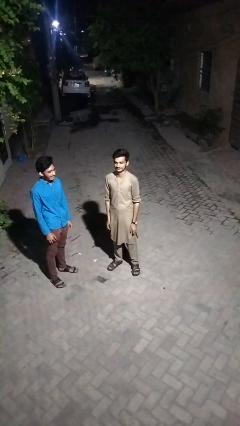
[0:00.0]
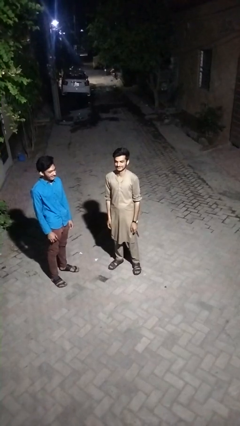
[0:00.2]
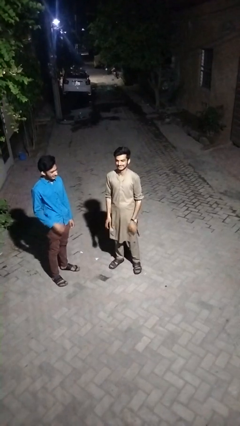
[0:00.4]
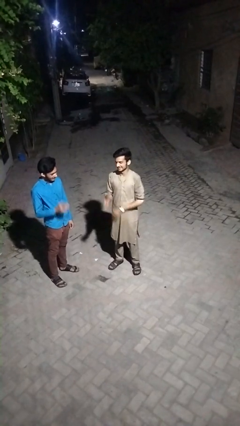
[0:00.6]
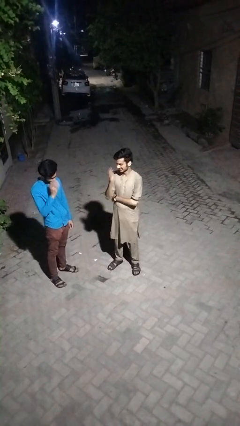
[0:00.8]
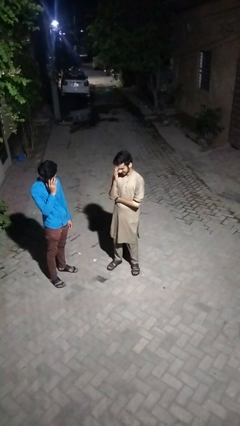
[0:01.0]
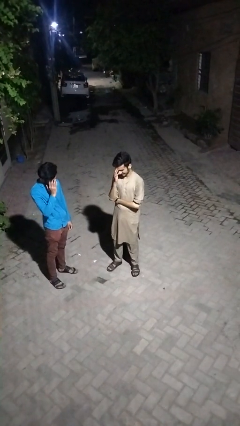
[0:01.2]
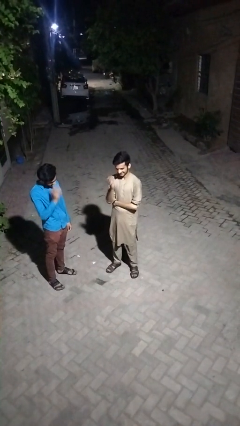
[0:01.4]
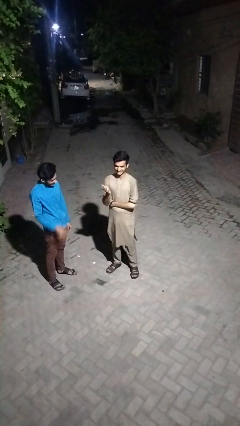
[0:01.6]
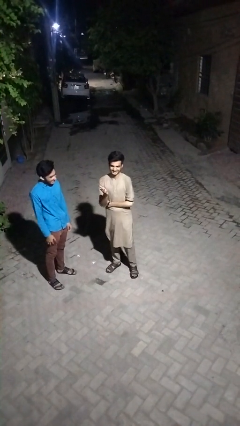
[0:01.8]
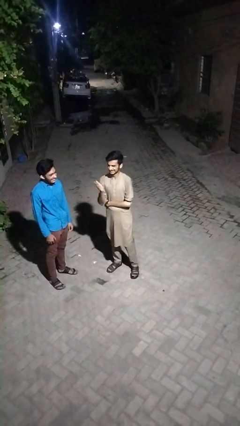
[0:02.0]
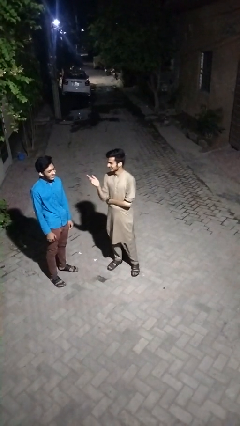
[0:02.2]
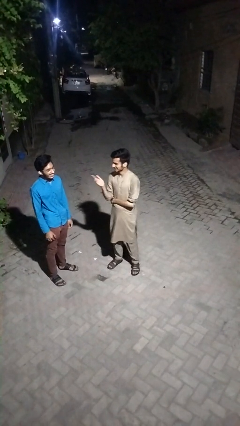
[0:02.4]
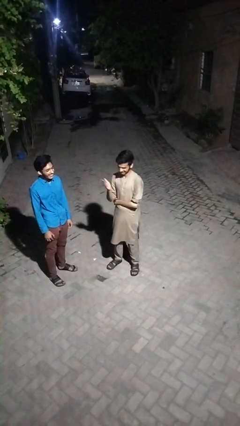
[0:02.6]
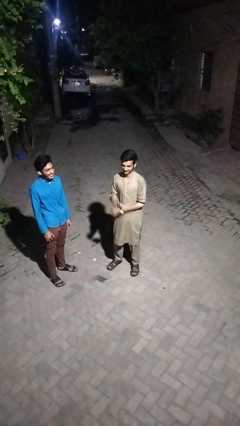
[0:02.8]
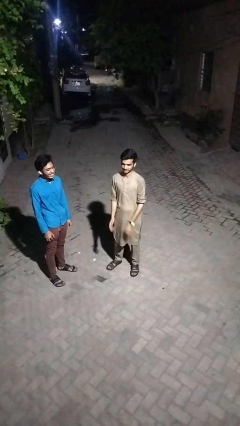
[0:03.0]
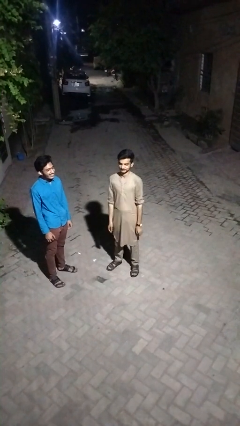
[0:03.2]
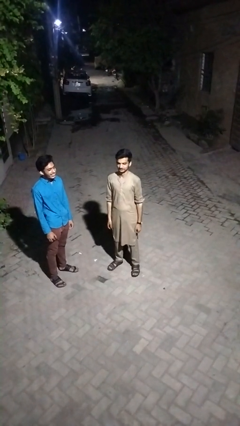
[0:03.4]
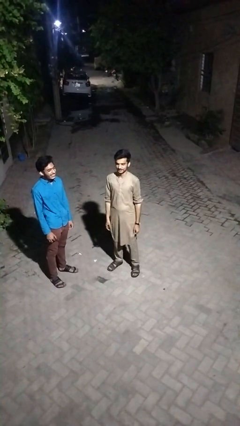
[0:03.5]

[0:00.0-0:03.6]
person laughs with person

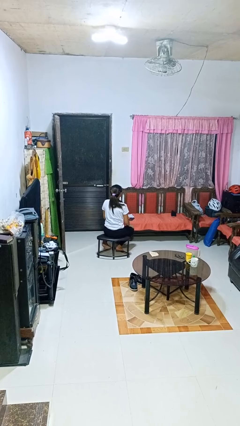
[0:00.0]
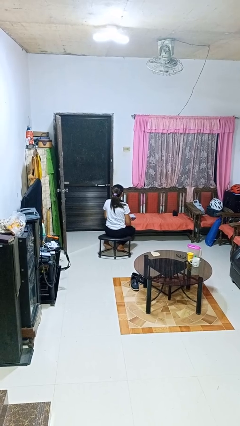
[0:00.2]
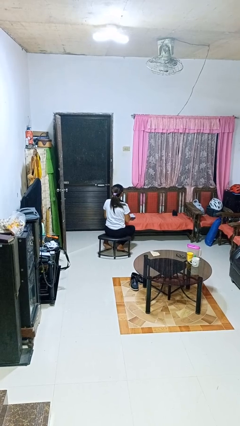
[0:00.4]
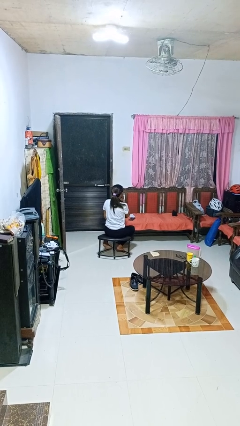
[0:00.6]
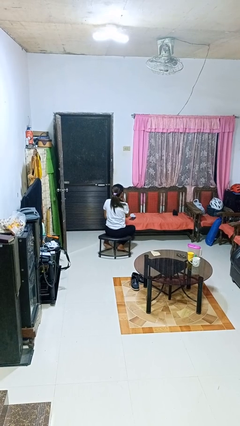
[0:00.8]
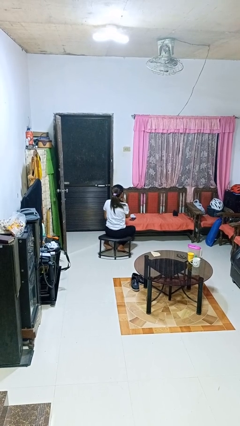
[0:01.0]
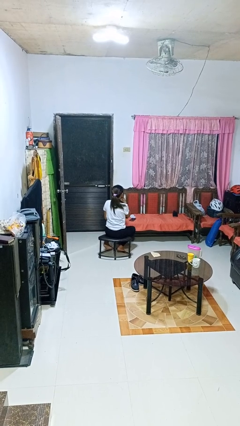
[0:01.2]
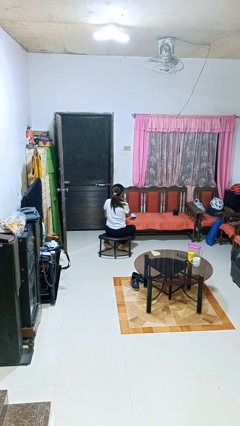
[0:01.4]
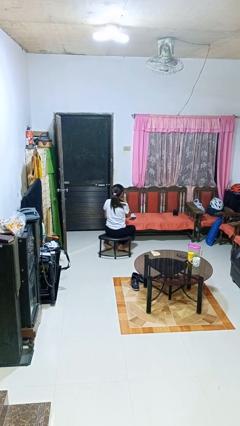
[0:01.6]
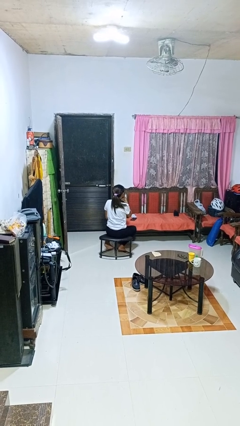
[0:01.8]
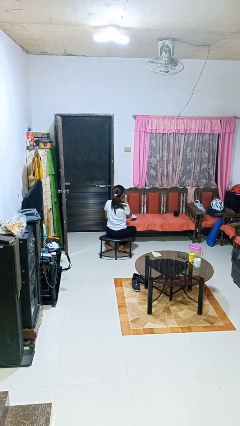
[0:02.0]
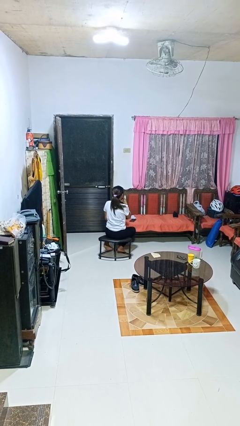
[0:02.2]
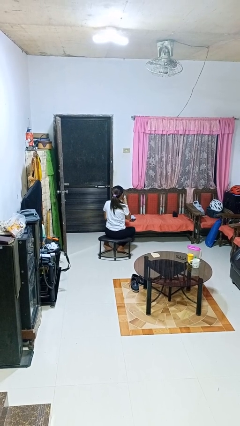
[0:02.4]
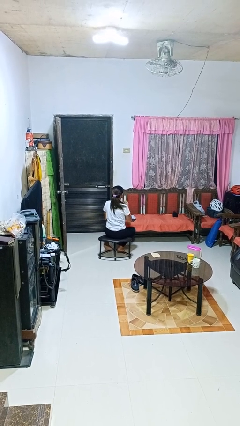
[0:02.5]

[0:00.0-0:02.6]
person strokes chin

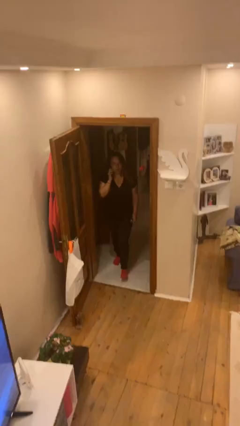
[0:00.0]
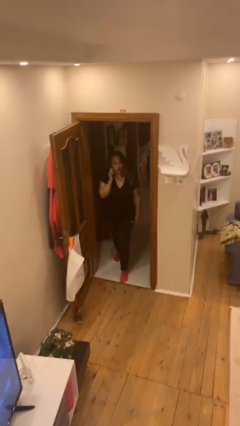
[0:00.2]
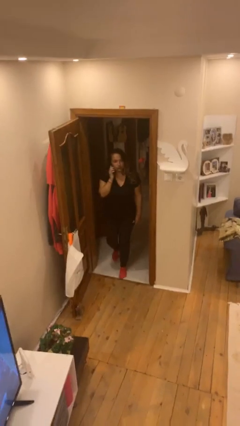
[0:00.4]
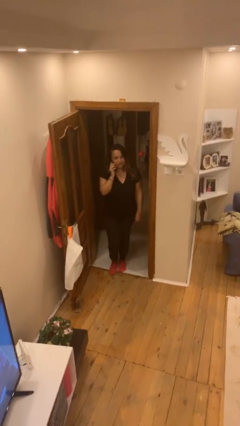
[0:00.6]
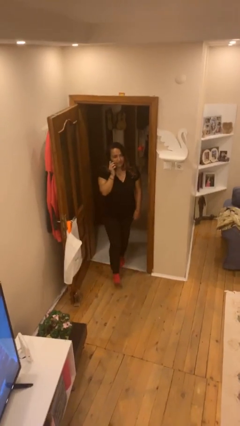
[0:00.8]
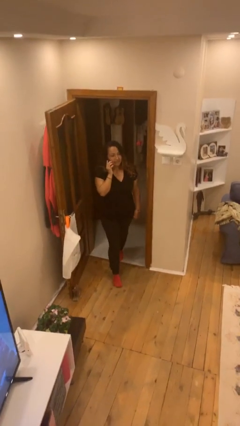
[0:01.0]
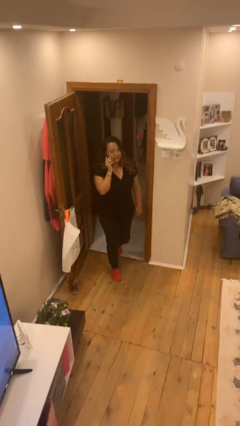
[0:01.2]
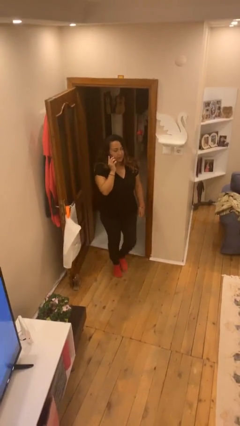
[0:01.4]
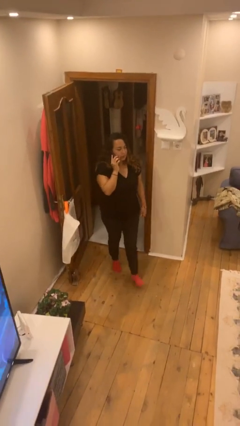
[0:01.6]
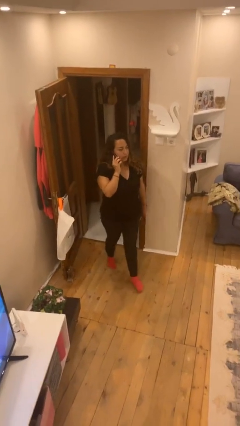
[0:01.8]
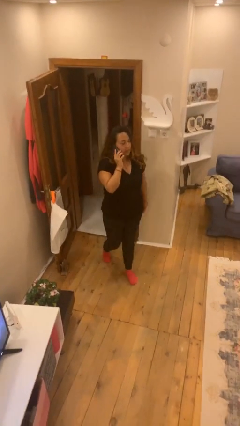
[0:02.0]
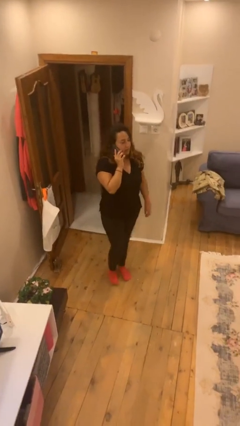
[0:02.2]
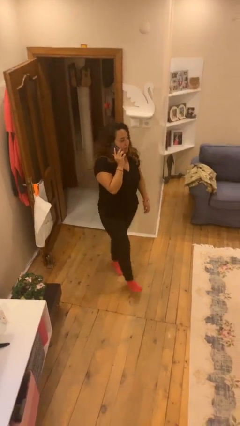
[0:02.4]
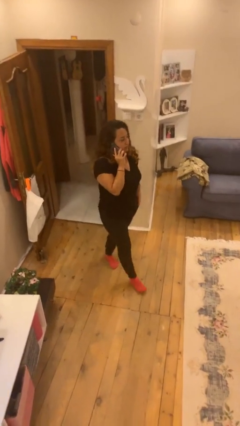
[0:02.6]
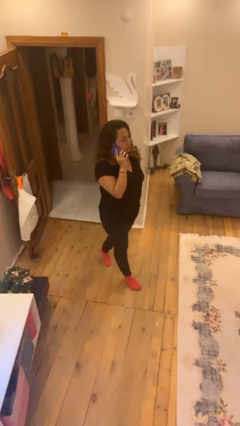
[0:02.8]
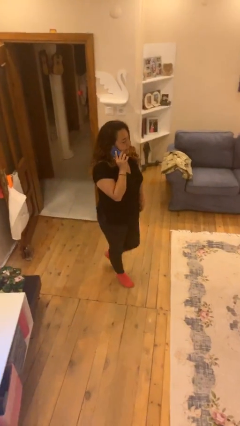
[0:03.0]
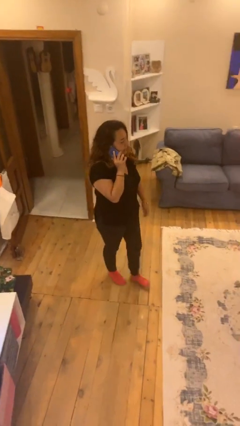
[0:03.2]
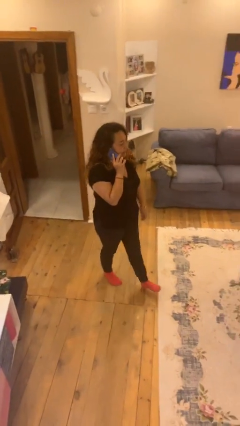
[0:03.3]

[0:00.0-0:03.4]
person enters scene through structure

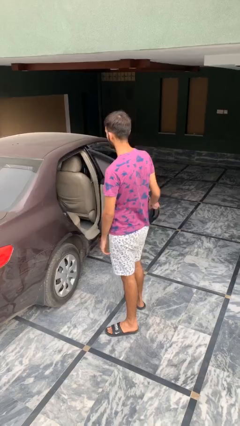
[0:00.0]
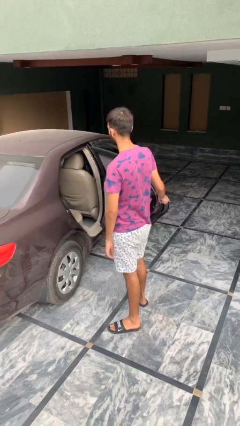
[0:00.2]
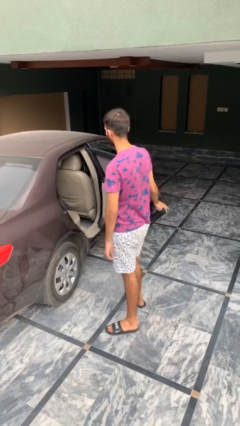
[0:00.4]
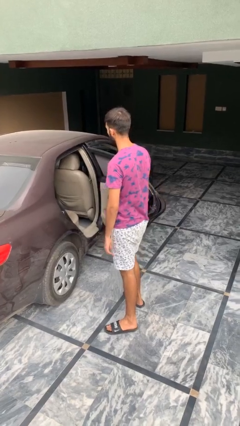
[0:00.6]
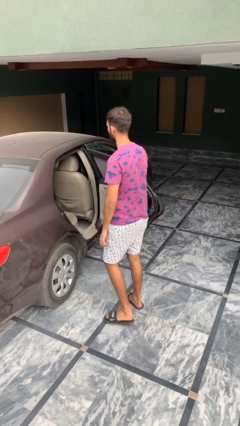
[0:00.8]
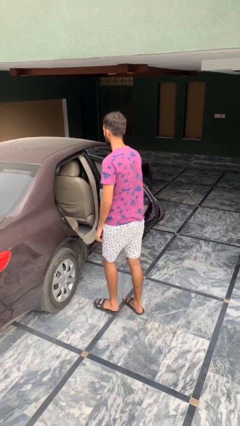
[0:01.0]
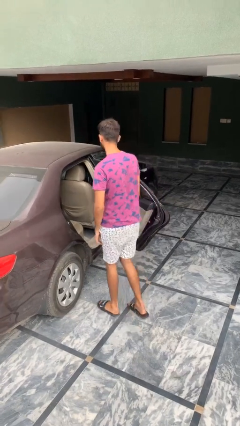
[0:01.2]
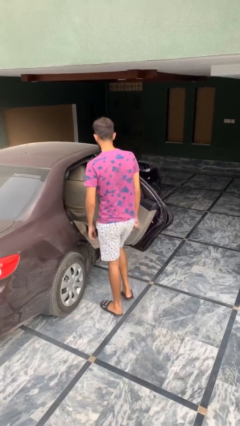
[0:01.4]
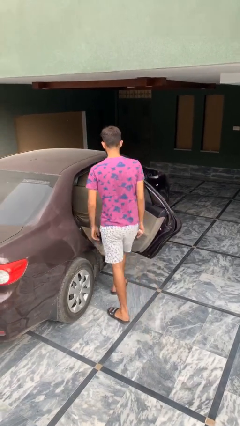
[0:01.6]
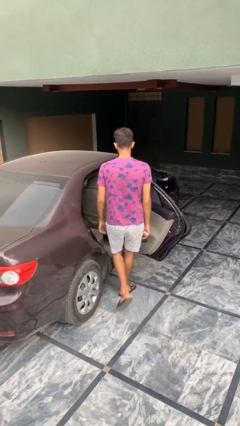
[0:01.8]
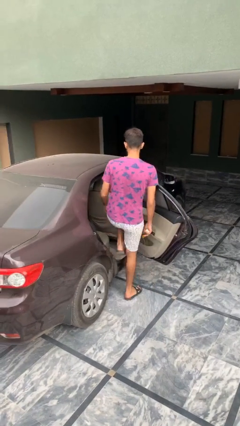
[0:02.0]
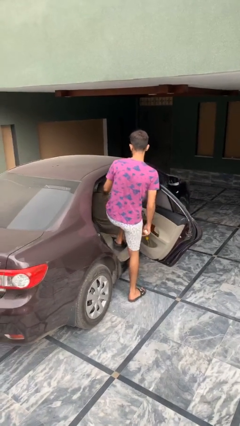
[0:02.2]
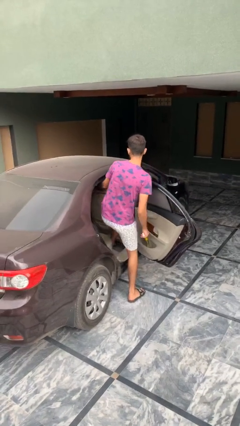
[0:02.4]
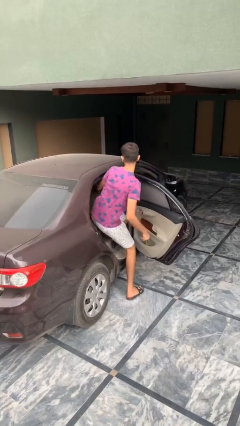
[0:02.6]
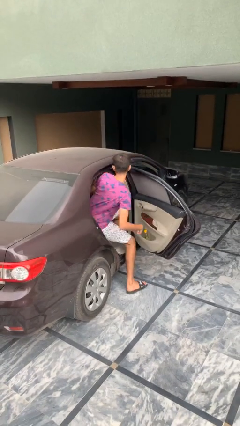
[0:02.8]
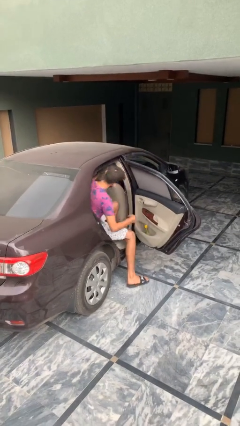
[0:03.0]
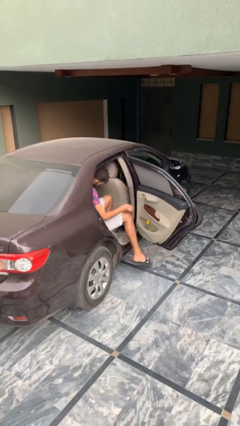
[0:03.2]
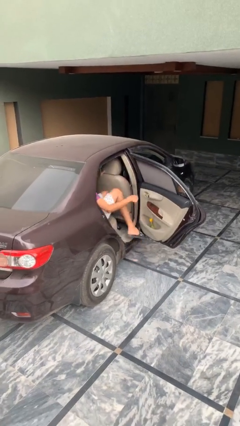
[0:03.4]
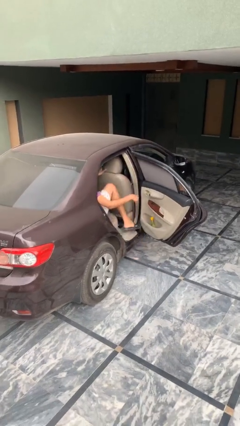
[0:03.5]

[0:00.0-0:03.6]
person enters car

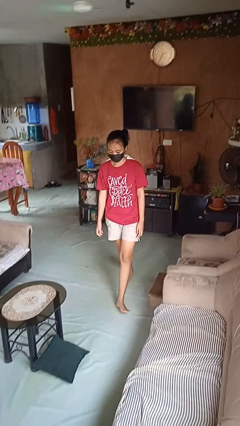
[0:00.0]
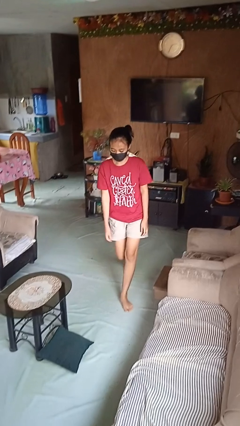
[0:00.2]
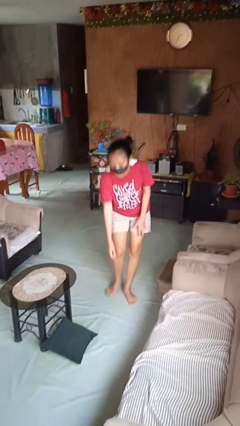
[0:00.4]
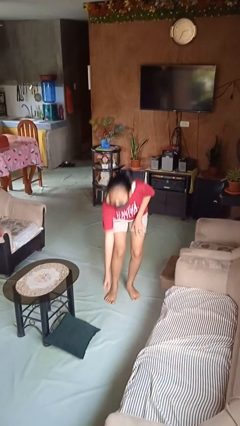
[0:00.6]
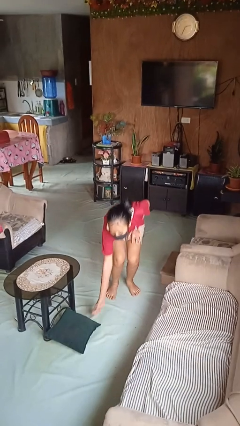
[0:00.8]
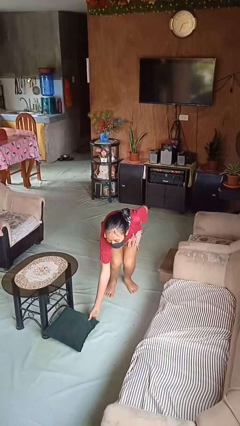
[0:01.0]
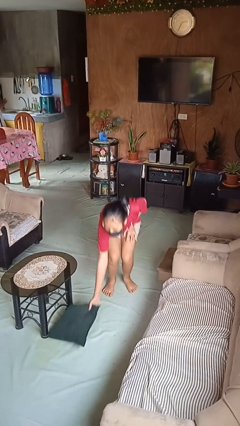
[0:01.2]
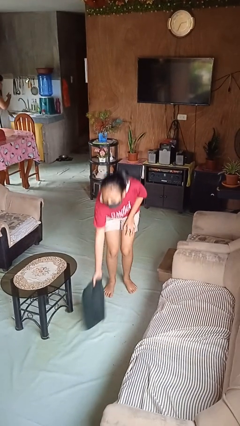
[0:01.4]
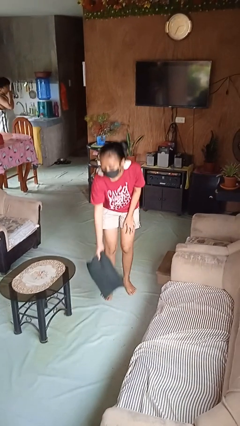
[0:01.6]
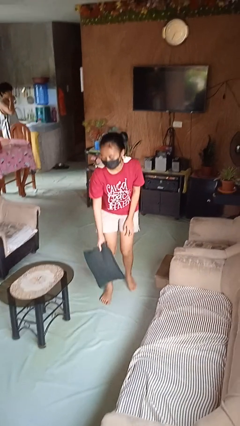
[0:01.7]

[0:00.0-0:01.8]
person picks up object from floor

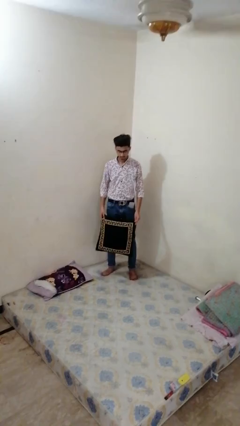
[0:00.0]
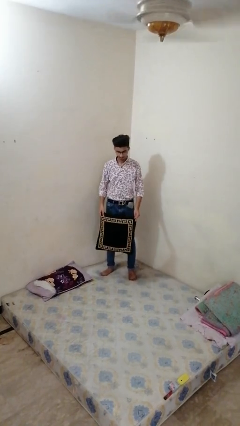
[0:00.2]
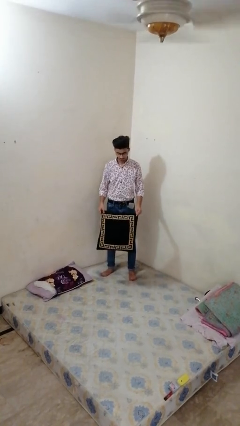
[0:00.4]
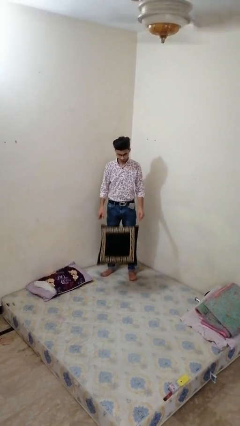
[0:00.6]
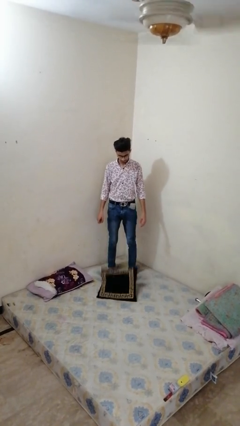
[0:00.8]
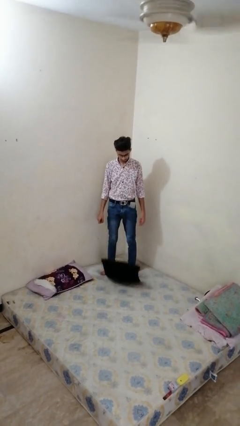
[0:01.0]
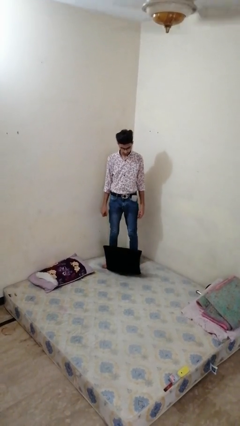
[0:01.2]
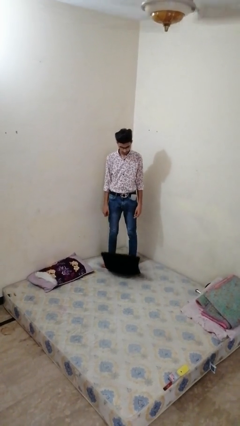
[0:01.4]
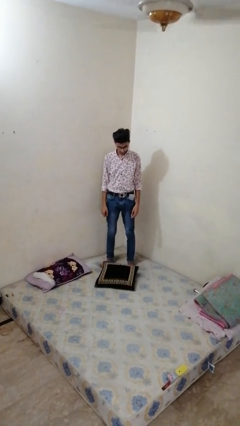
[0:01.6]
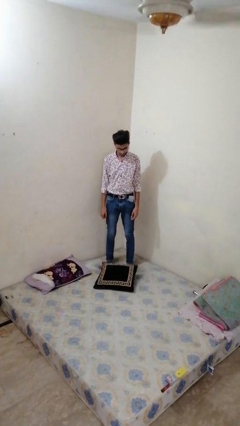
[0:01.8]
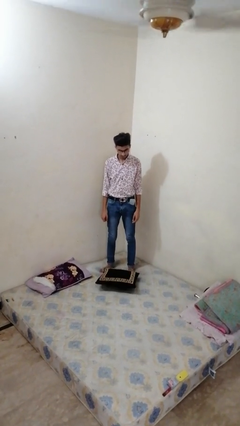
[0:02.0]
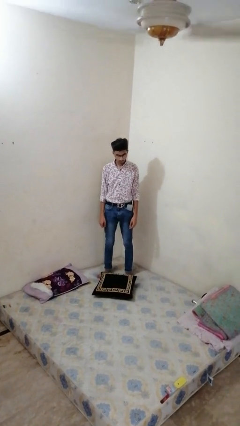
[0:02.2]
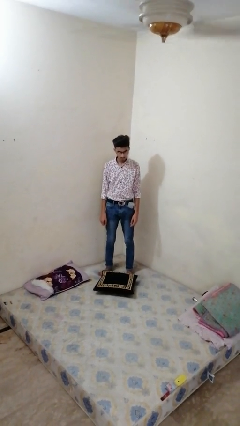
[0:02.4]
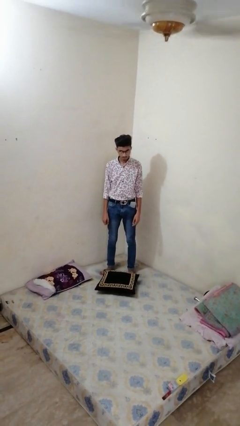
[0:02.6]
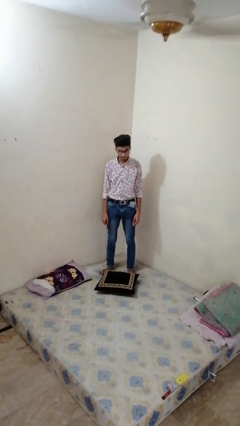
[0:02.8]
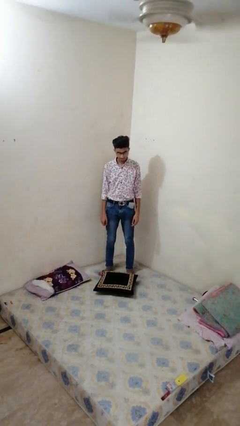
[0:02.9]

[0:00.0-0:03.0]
person throws object on bed
